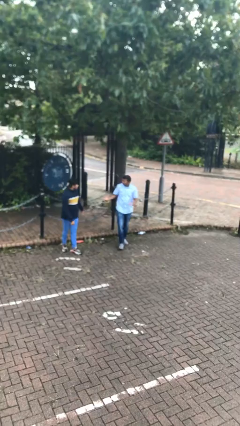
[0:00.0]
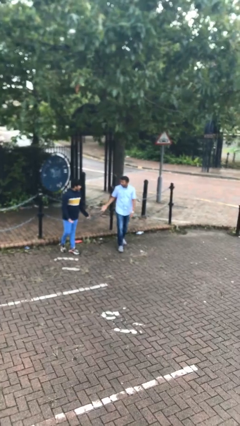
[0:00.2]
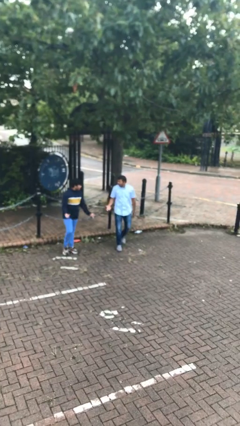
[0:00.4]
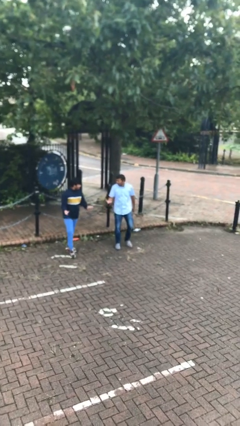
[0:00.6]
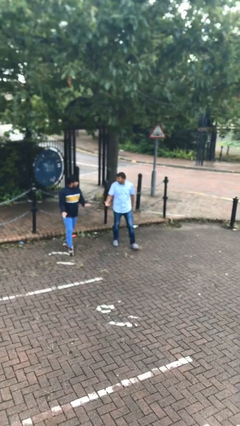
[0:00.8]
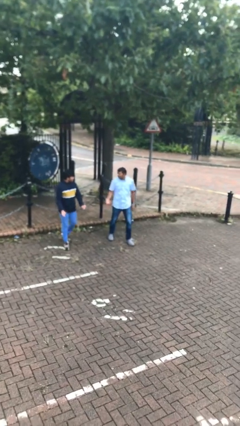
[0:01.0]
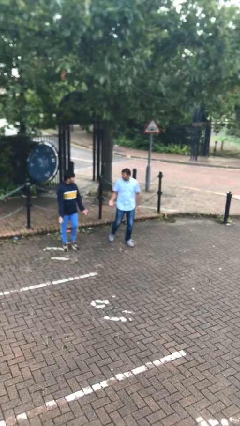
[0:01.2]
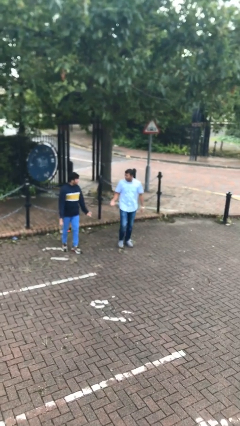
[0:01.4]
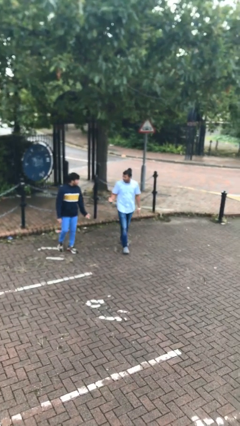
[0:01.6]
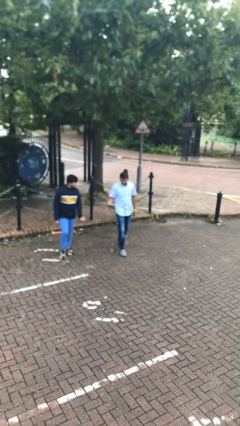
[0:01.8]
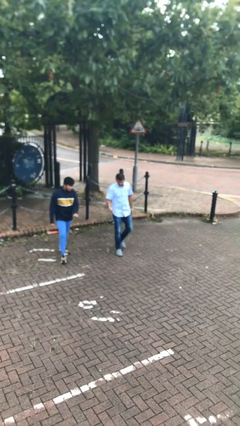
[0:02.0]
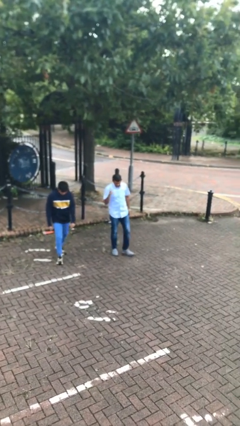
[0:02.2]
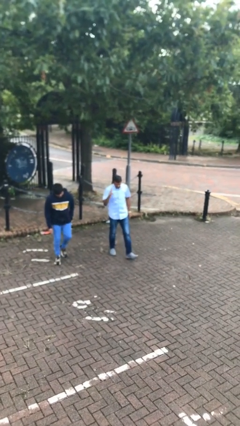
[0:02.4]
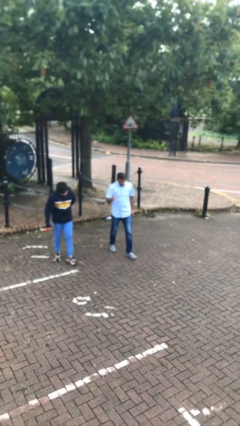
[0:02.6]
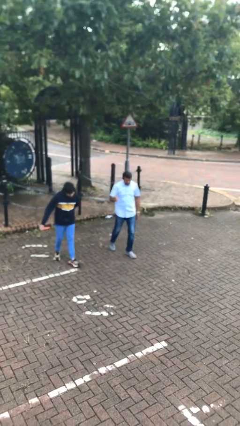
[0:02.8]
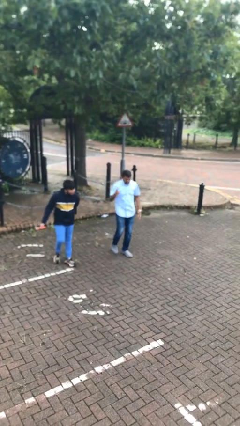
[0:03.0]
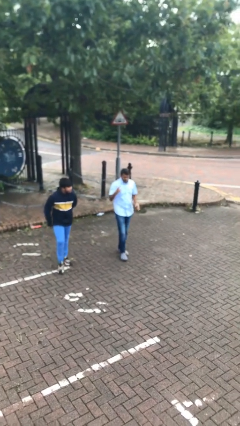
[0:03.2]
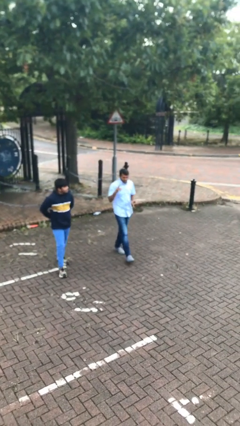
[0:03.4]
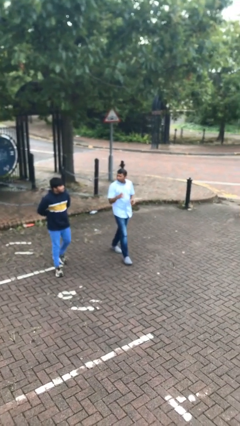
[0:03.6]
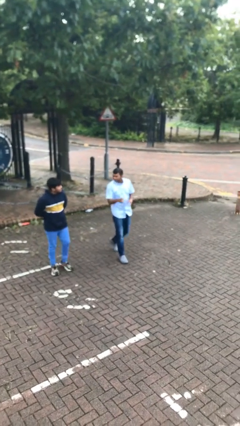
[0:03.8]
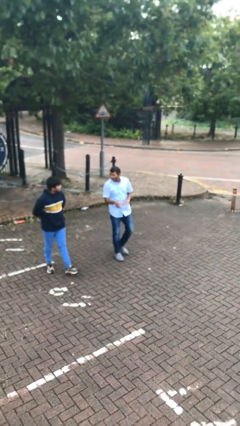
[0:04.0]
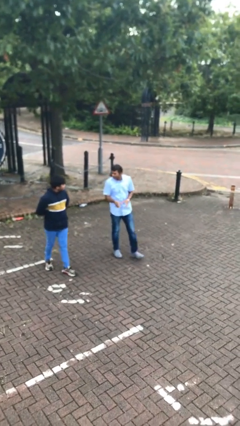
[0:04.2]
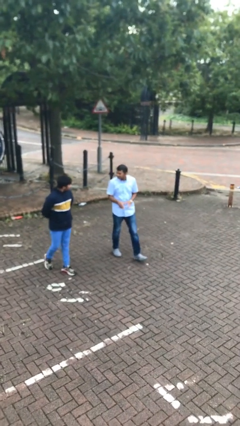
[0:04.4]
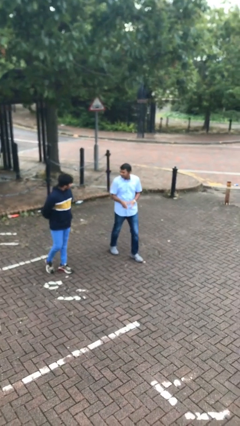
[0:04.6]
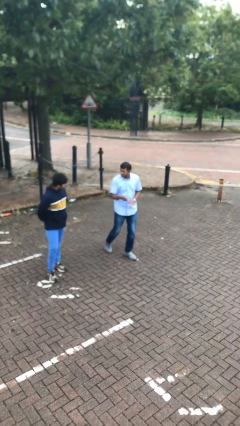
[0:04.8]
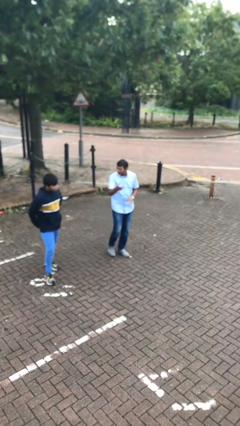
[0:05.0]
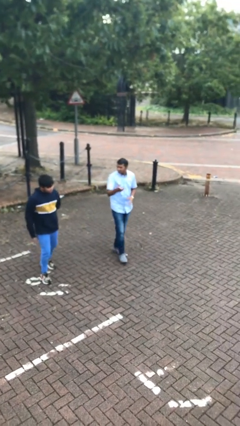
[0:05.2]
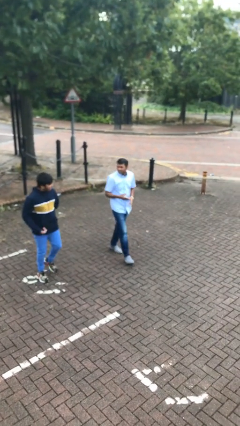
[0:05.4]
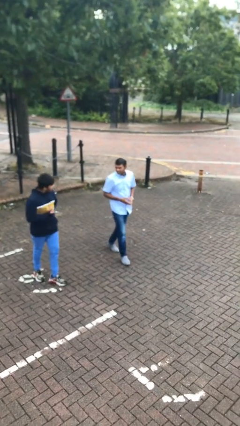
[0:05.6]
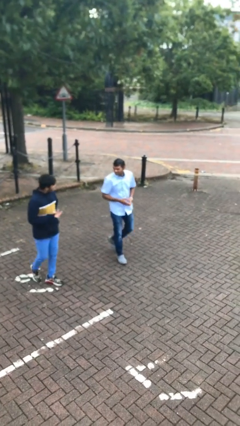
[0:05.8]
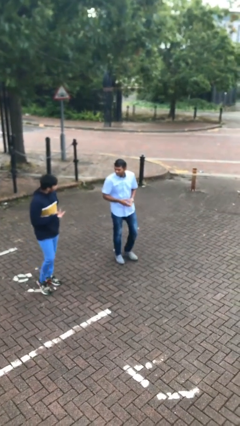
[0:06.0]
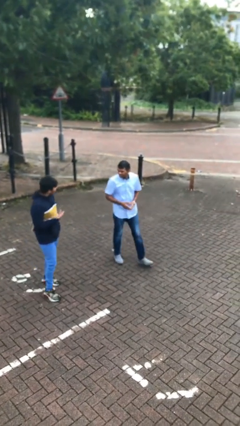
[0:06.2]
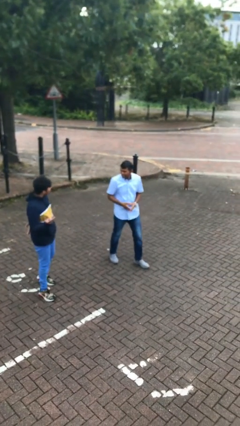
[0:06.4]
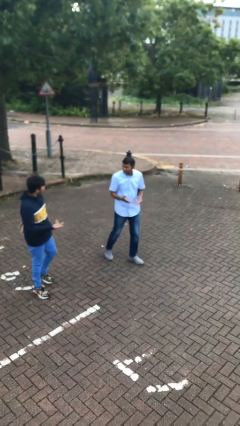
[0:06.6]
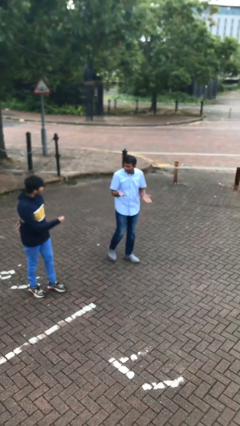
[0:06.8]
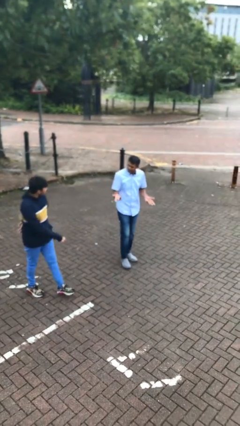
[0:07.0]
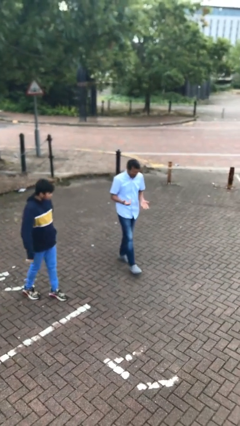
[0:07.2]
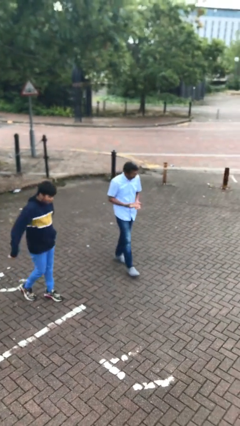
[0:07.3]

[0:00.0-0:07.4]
person talks to person

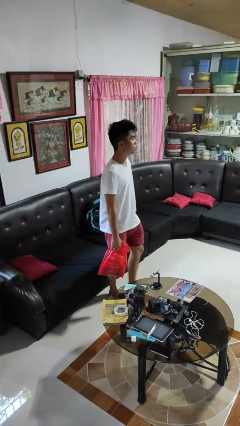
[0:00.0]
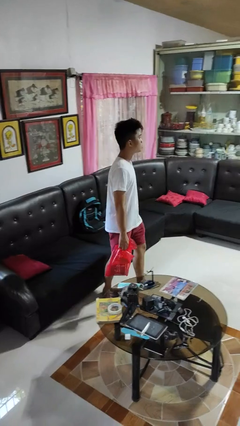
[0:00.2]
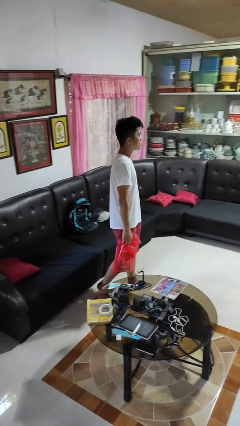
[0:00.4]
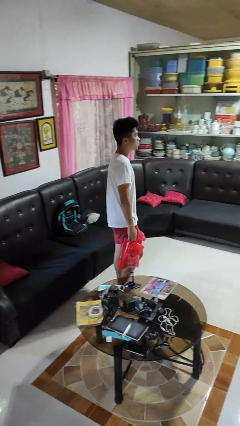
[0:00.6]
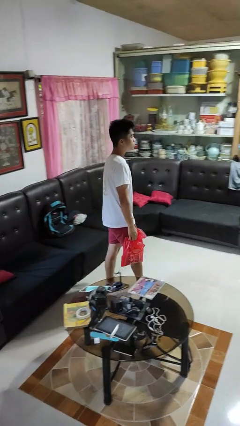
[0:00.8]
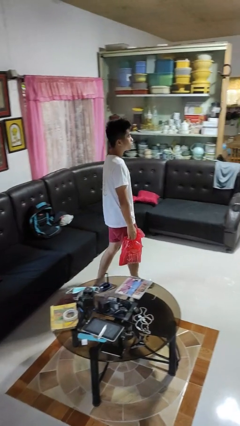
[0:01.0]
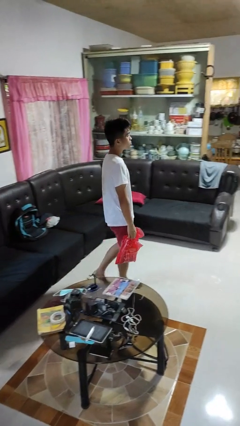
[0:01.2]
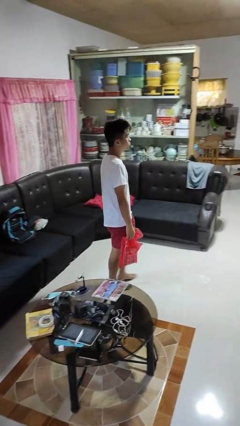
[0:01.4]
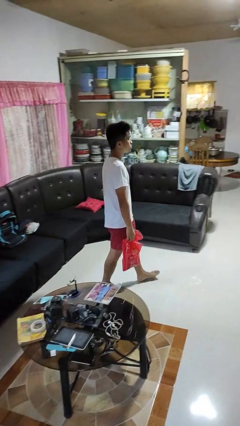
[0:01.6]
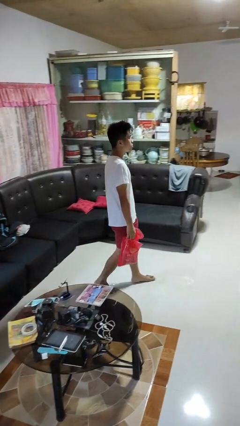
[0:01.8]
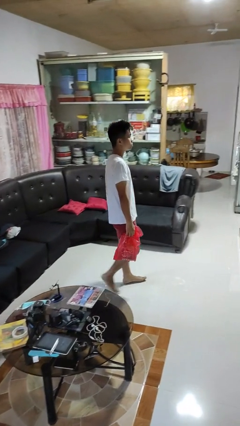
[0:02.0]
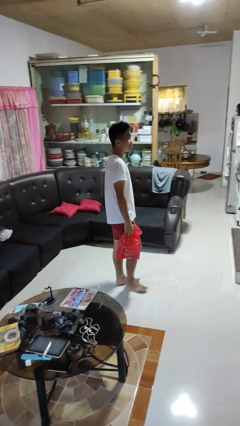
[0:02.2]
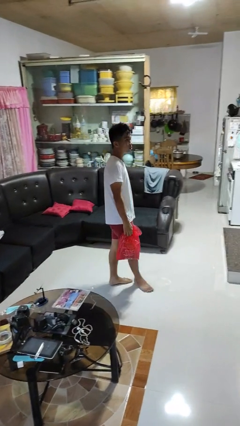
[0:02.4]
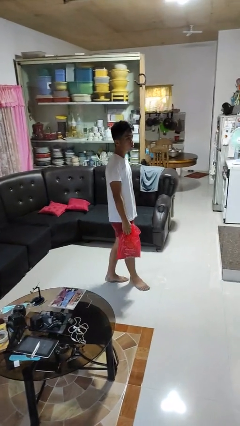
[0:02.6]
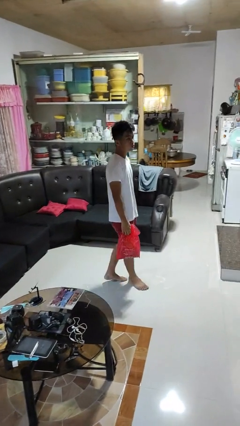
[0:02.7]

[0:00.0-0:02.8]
person carries groceries

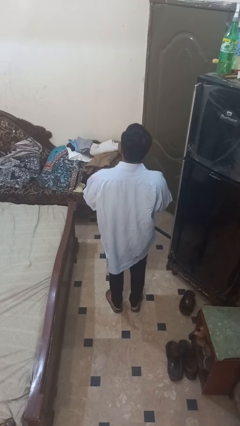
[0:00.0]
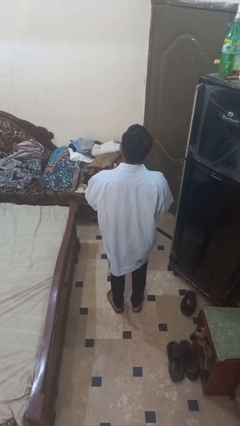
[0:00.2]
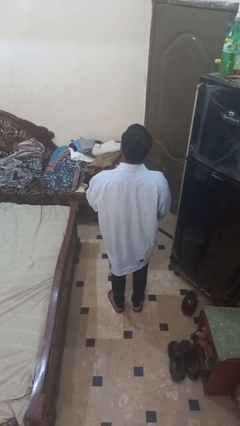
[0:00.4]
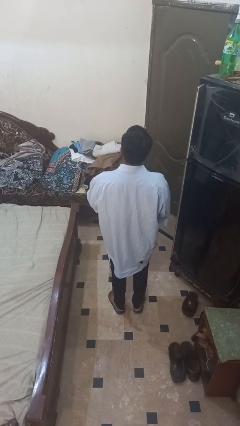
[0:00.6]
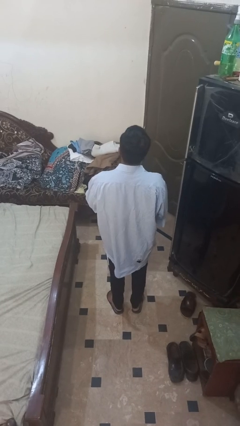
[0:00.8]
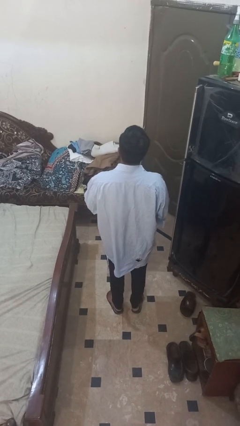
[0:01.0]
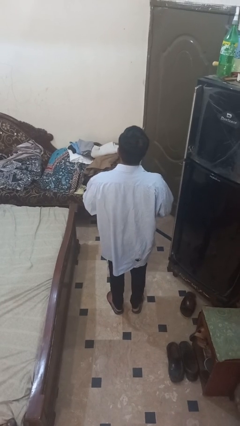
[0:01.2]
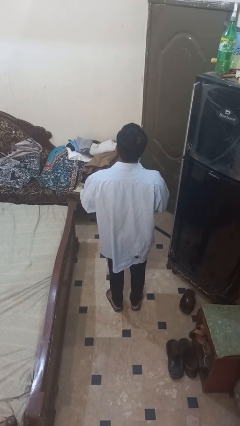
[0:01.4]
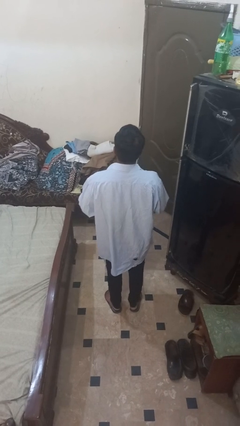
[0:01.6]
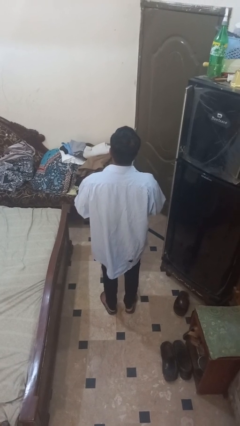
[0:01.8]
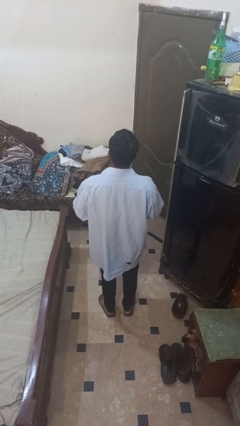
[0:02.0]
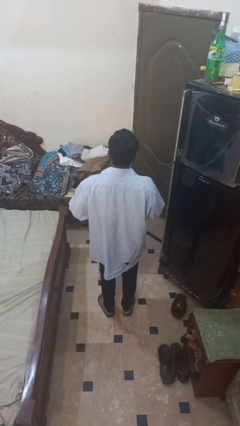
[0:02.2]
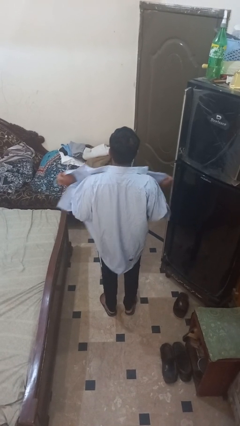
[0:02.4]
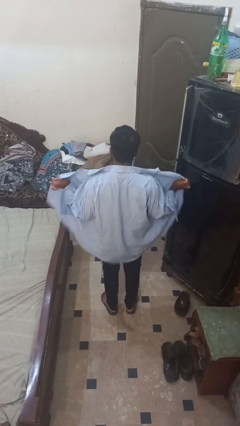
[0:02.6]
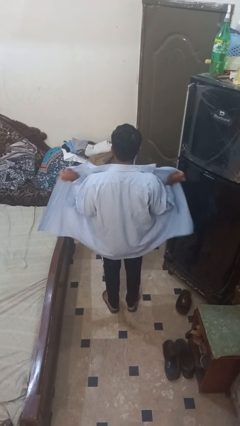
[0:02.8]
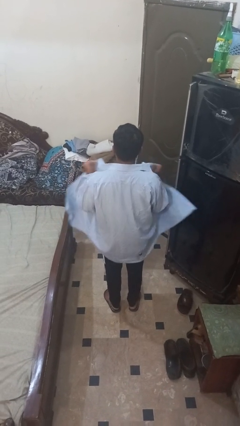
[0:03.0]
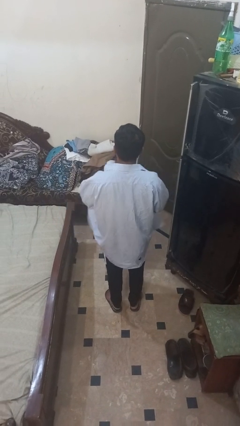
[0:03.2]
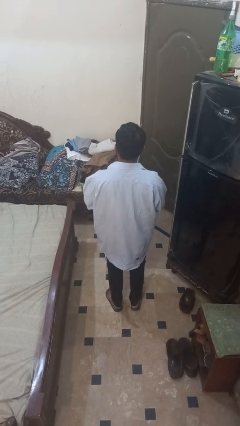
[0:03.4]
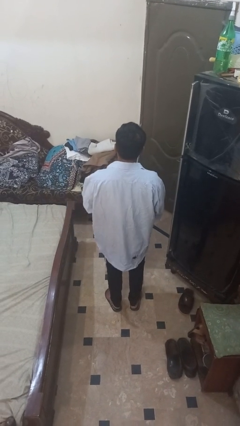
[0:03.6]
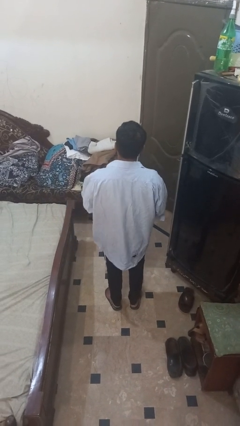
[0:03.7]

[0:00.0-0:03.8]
person unbuttons shirt

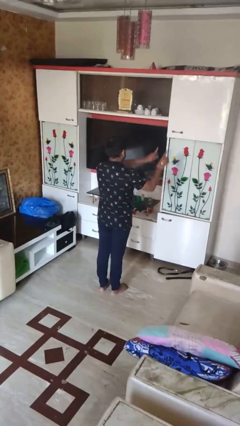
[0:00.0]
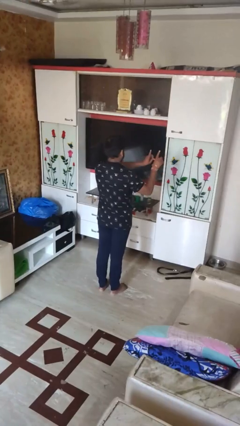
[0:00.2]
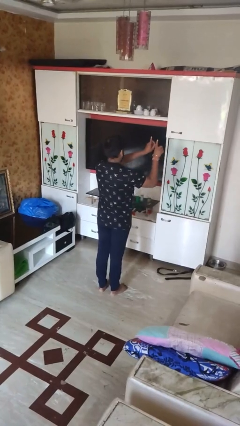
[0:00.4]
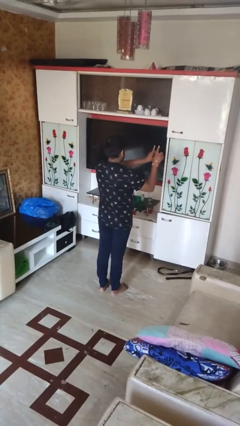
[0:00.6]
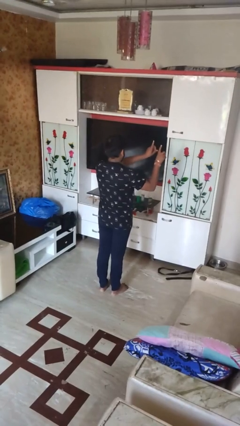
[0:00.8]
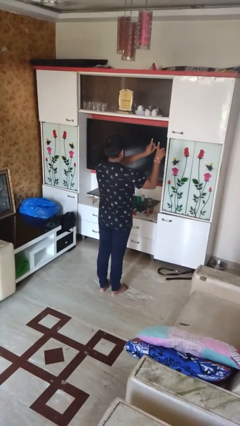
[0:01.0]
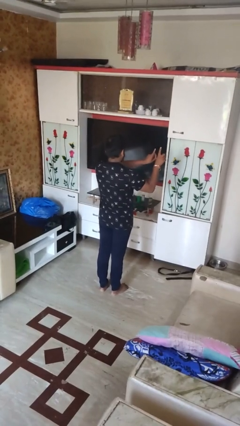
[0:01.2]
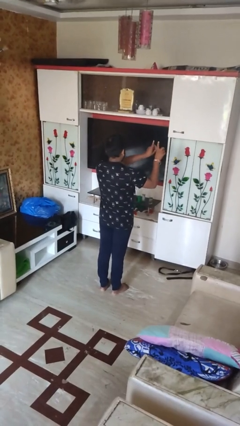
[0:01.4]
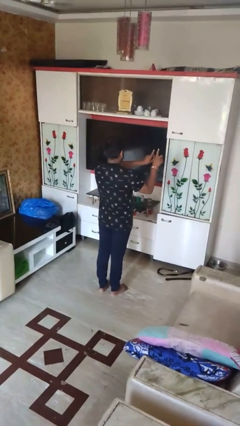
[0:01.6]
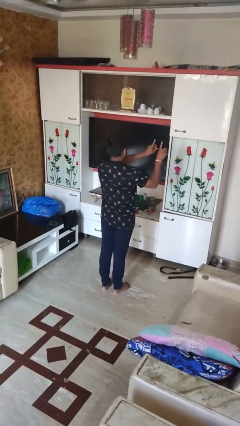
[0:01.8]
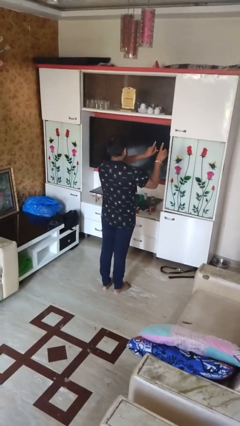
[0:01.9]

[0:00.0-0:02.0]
person dances in place

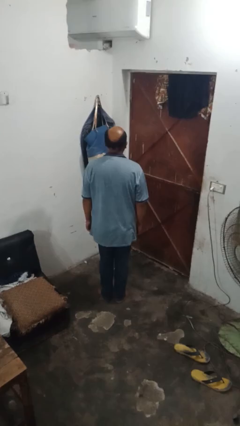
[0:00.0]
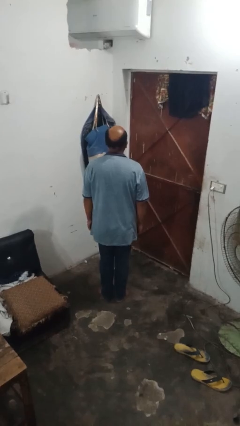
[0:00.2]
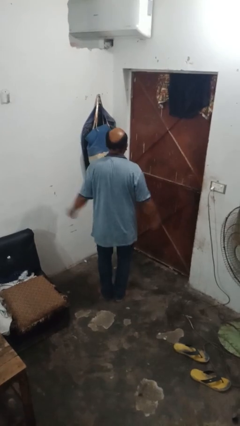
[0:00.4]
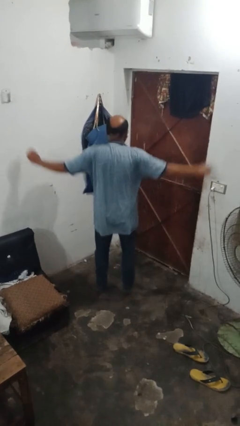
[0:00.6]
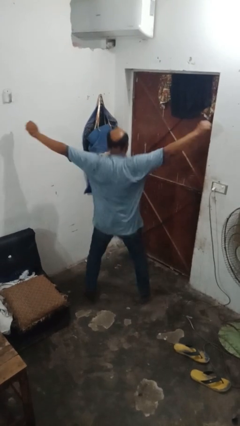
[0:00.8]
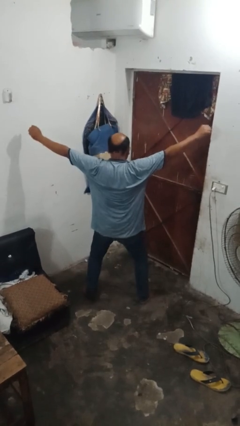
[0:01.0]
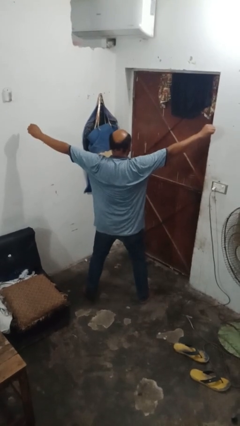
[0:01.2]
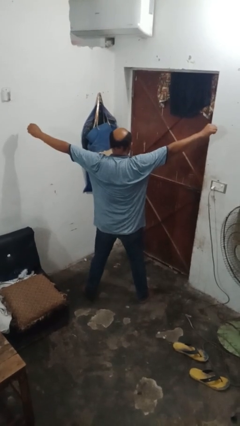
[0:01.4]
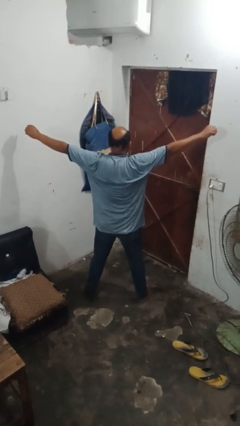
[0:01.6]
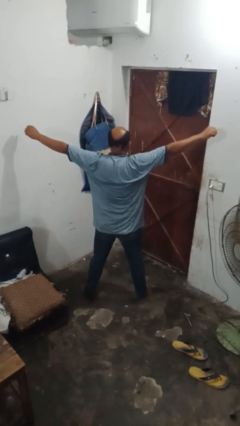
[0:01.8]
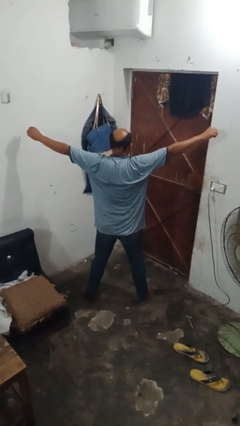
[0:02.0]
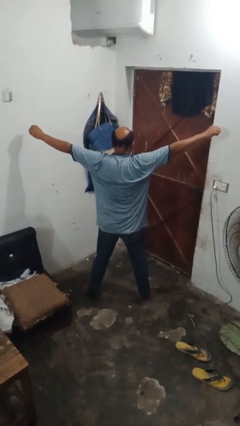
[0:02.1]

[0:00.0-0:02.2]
person exercises with jumping jacks
